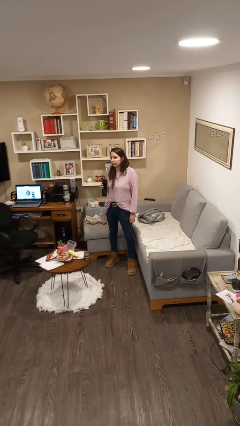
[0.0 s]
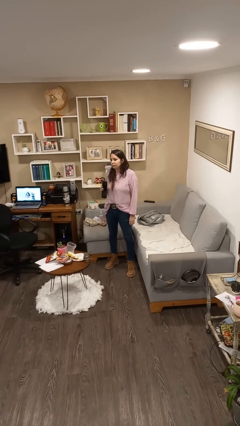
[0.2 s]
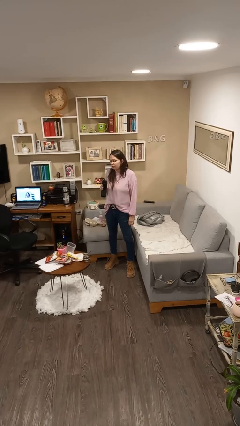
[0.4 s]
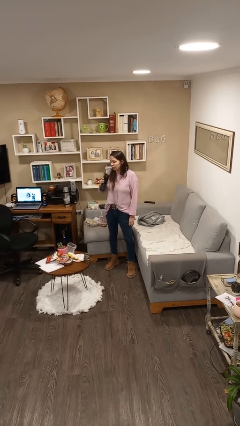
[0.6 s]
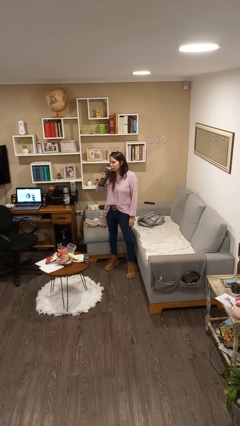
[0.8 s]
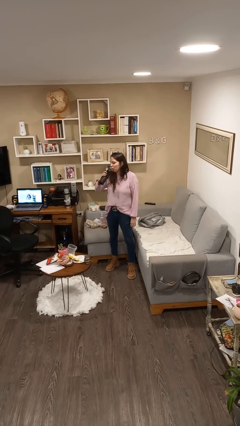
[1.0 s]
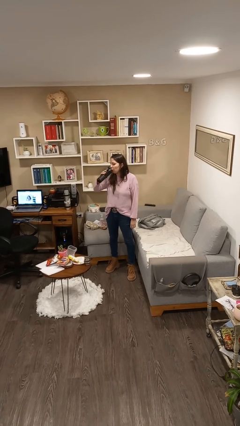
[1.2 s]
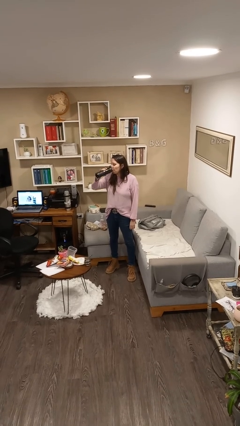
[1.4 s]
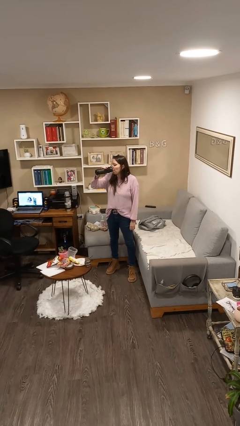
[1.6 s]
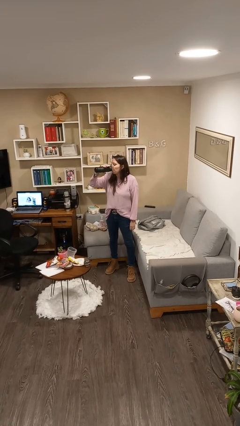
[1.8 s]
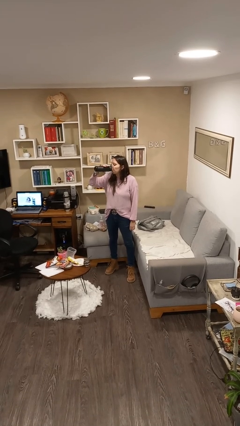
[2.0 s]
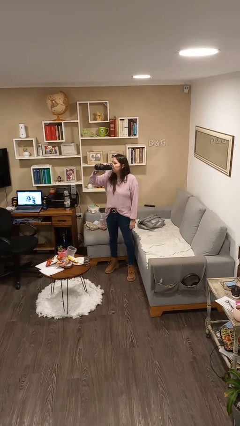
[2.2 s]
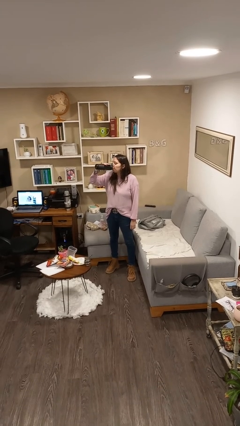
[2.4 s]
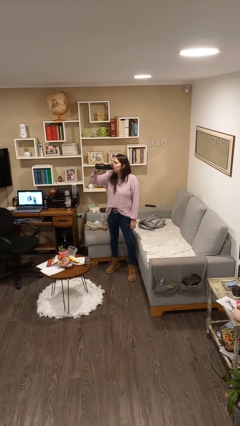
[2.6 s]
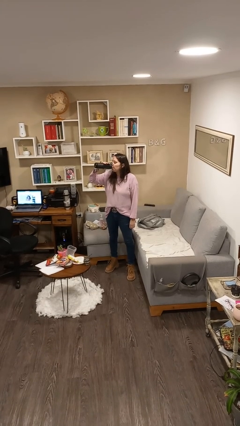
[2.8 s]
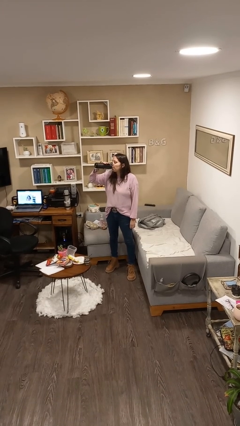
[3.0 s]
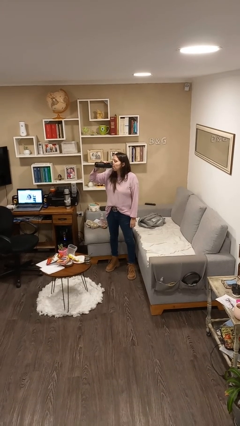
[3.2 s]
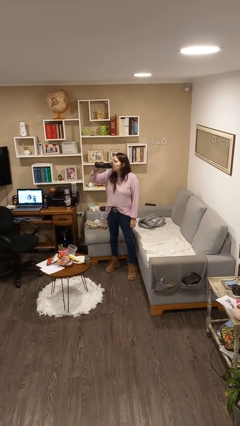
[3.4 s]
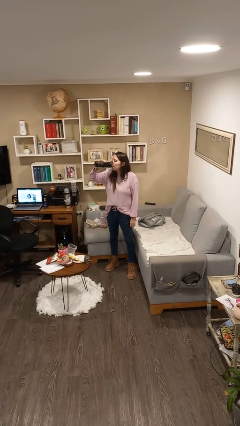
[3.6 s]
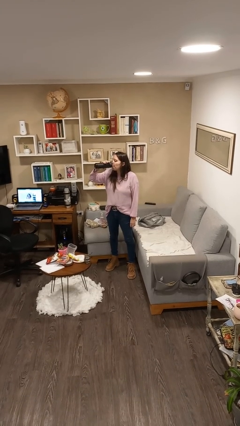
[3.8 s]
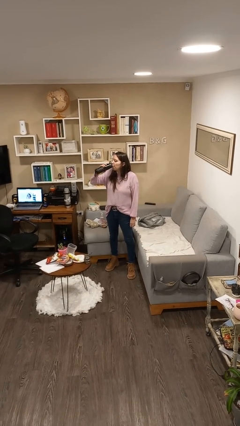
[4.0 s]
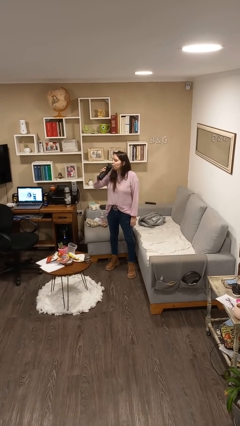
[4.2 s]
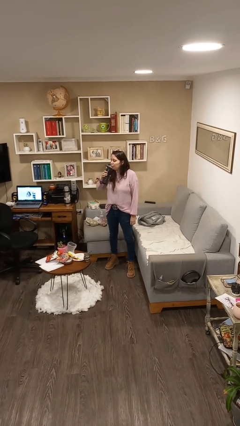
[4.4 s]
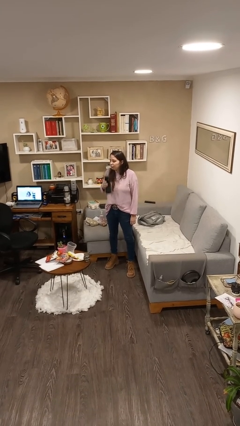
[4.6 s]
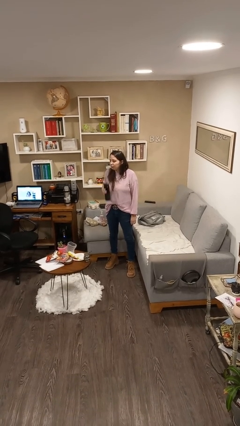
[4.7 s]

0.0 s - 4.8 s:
person drinks from bottle

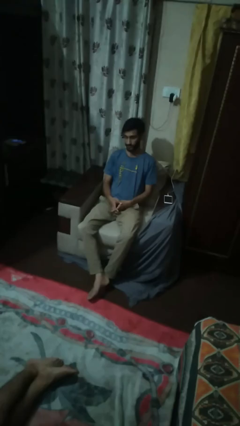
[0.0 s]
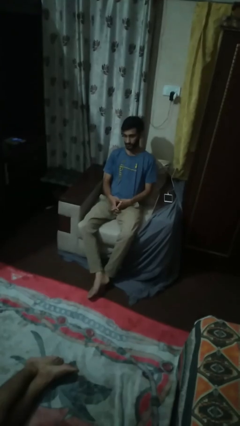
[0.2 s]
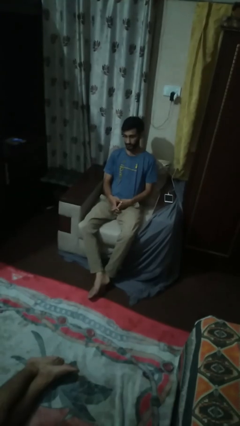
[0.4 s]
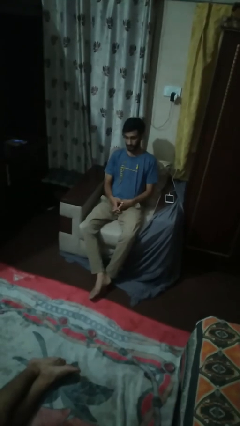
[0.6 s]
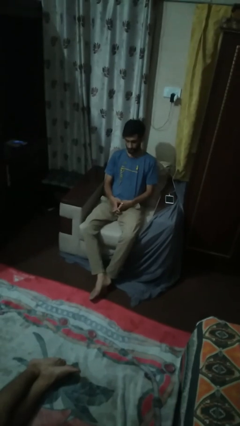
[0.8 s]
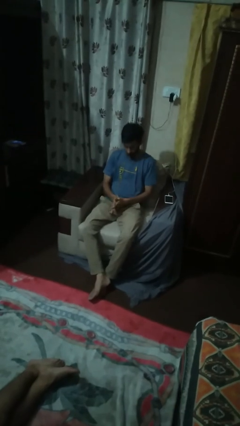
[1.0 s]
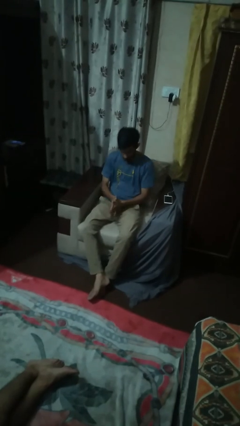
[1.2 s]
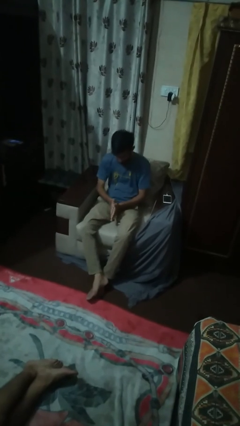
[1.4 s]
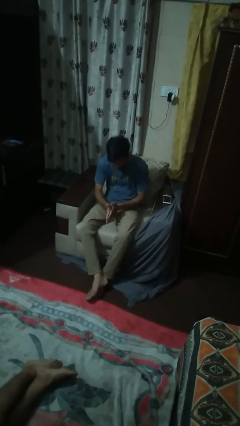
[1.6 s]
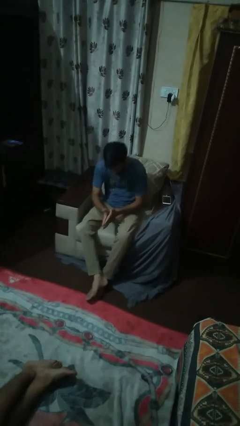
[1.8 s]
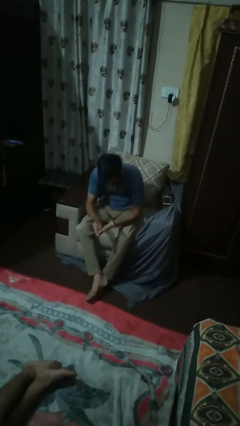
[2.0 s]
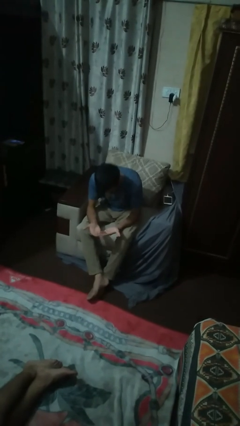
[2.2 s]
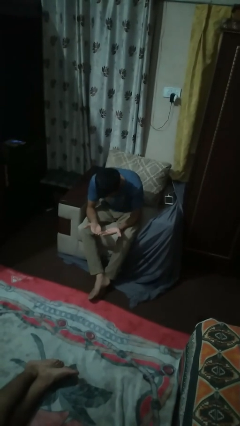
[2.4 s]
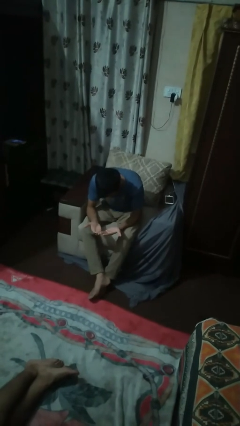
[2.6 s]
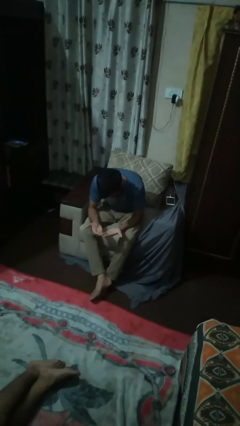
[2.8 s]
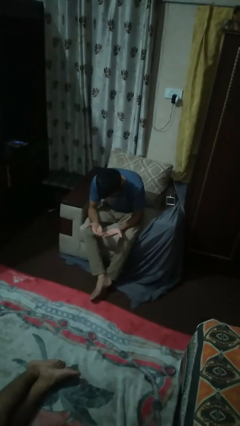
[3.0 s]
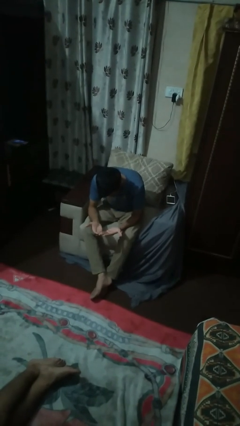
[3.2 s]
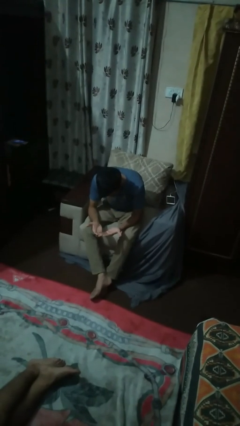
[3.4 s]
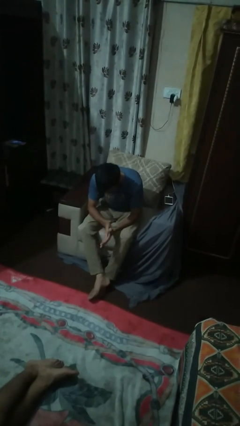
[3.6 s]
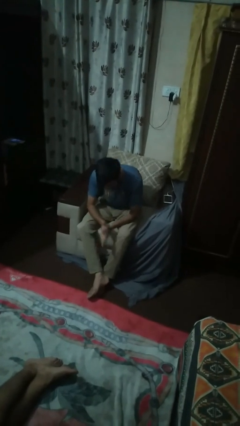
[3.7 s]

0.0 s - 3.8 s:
person looks at hands in lap

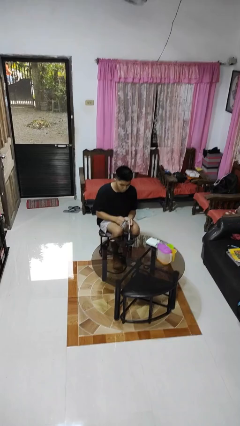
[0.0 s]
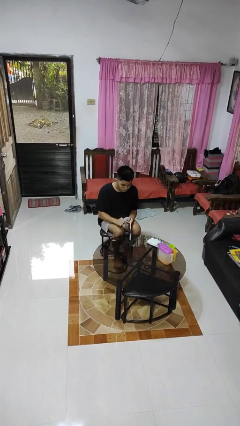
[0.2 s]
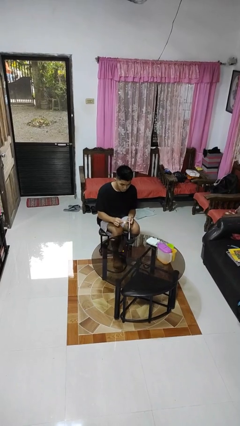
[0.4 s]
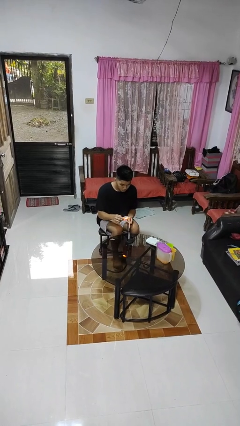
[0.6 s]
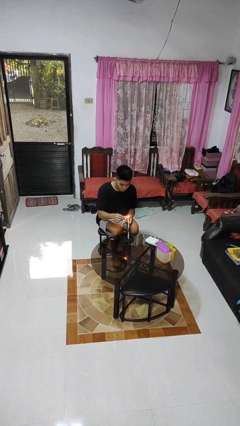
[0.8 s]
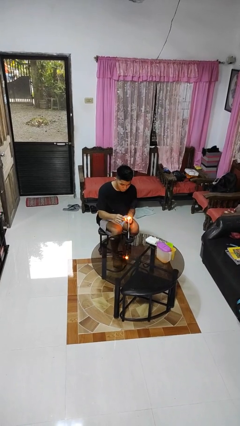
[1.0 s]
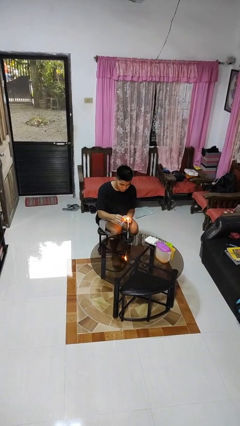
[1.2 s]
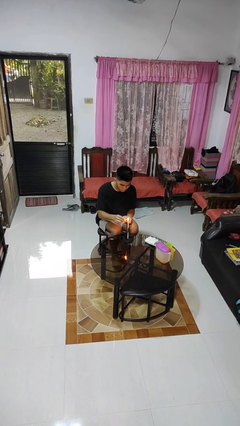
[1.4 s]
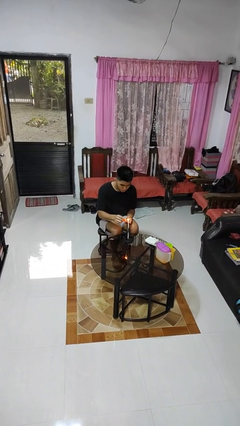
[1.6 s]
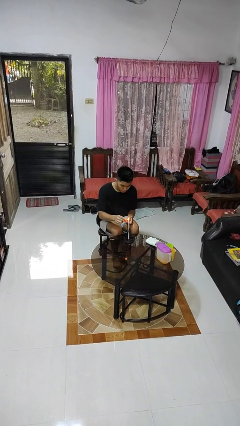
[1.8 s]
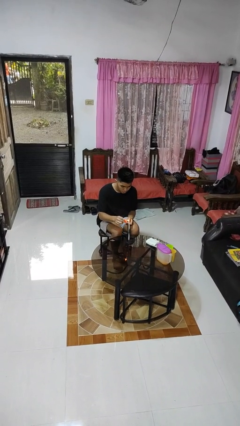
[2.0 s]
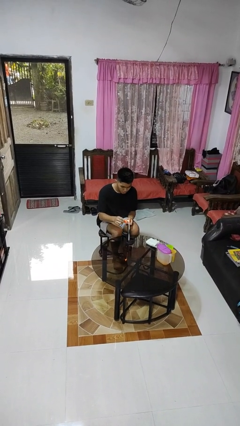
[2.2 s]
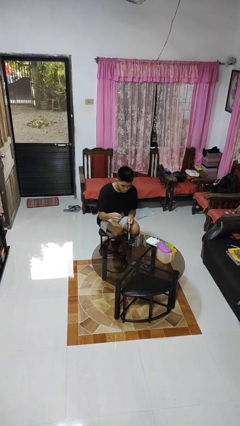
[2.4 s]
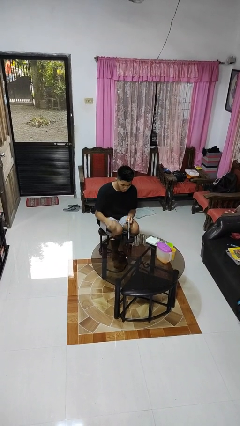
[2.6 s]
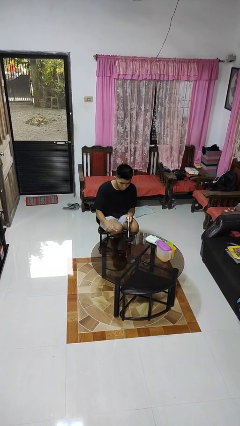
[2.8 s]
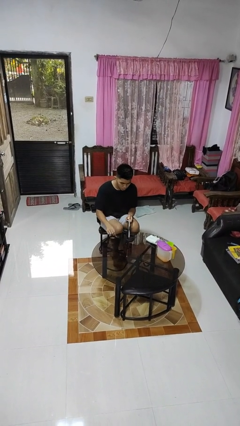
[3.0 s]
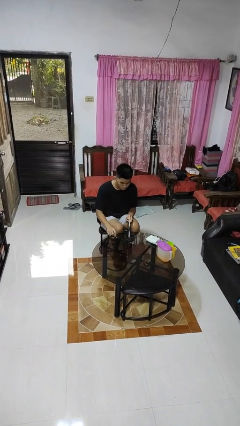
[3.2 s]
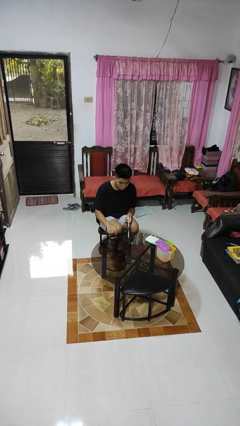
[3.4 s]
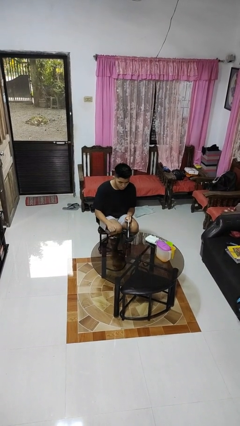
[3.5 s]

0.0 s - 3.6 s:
person lights candle

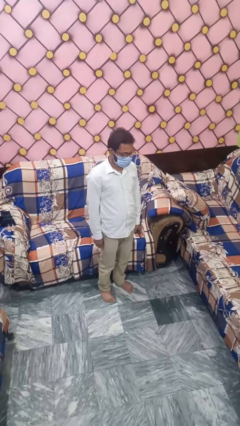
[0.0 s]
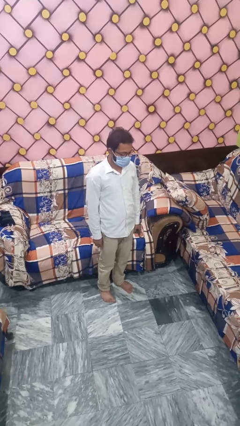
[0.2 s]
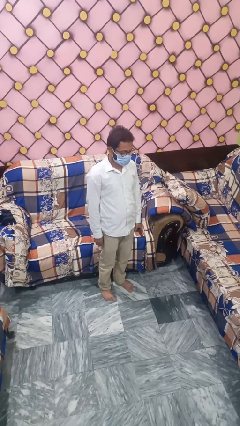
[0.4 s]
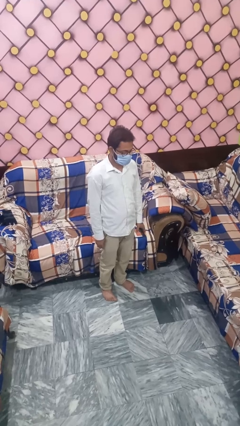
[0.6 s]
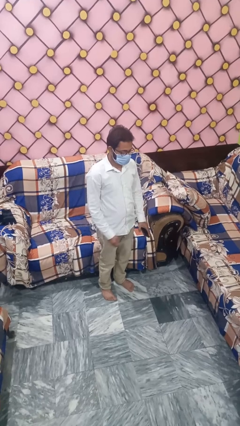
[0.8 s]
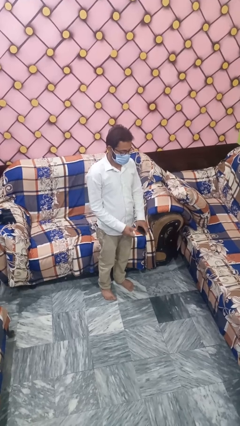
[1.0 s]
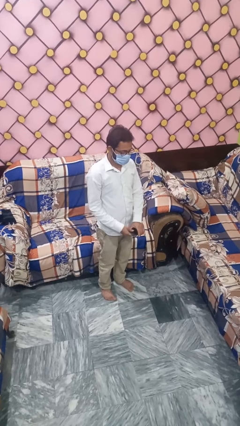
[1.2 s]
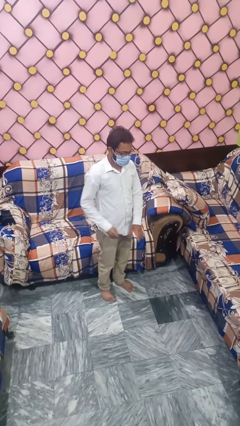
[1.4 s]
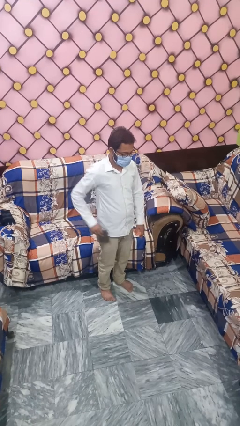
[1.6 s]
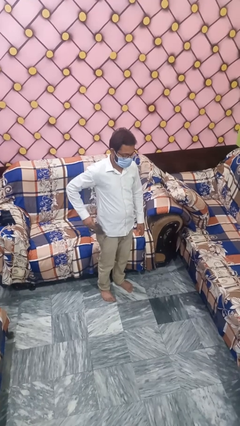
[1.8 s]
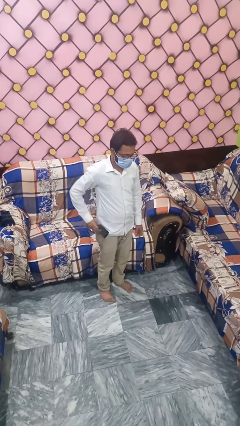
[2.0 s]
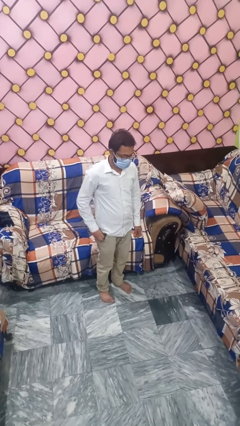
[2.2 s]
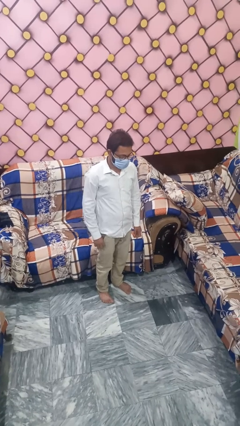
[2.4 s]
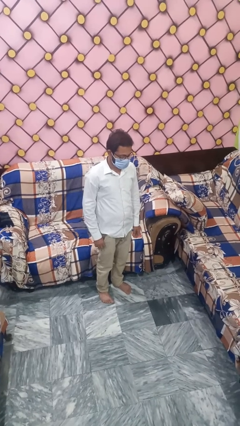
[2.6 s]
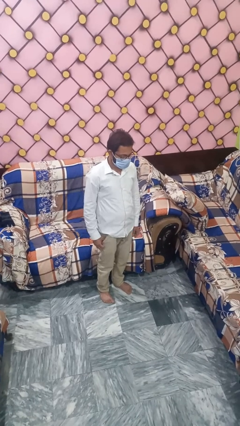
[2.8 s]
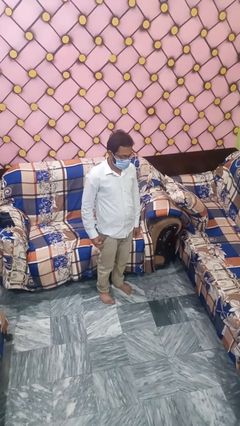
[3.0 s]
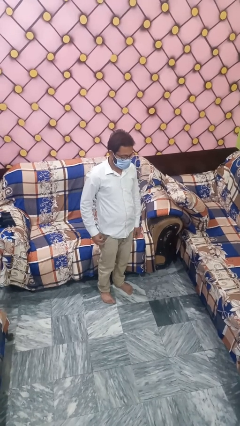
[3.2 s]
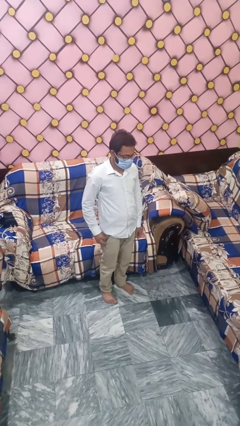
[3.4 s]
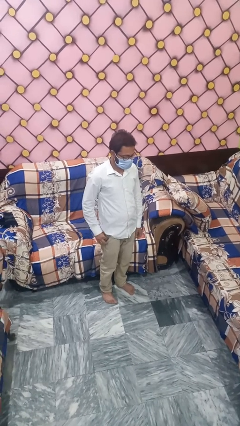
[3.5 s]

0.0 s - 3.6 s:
person takes phone from pocket

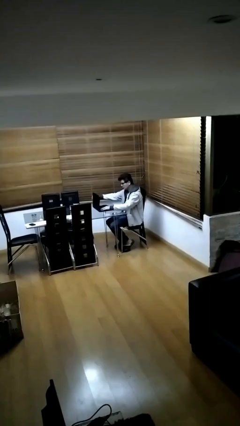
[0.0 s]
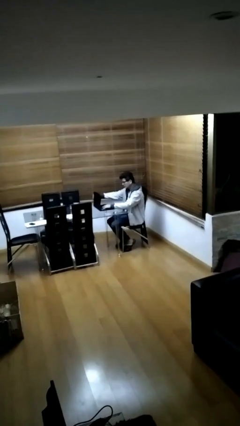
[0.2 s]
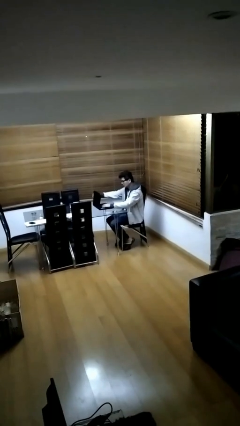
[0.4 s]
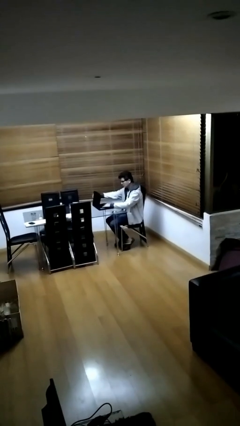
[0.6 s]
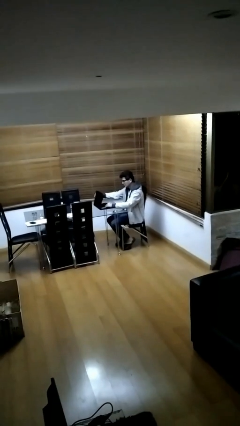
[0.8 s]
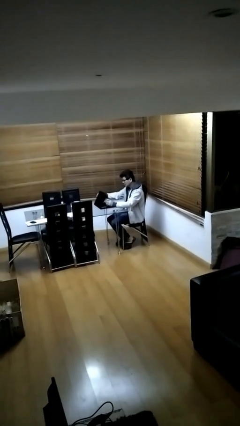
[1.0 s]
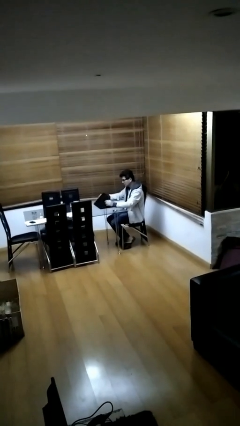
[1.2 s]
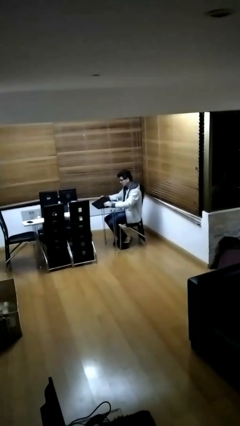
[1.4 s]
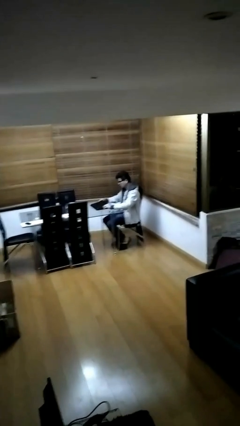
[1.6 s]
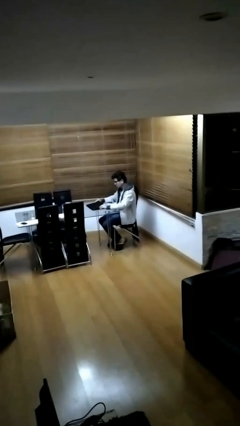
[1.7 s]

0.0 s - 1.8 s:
person interacts with laptop

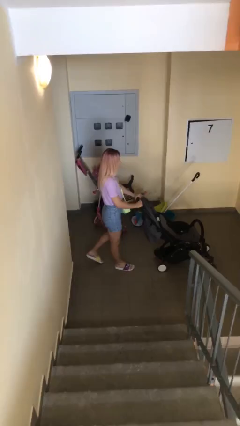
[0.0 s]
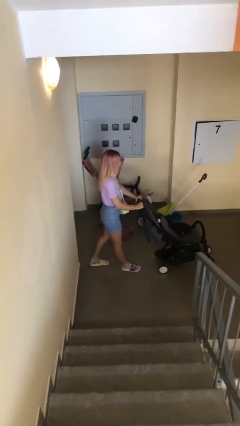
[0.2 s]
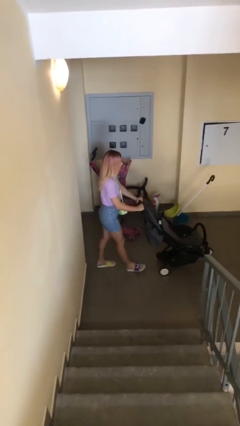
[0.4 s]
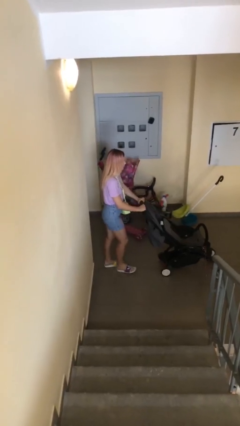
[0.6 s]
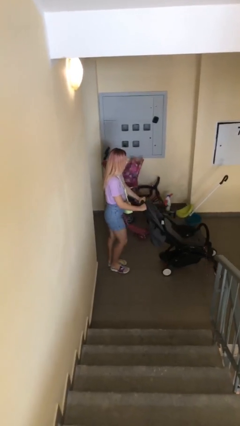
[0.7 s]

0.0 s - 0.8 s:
person pulls wheeled cart
